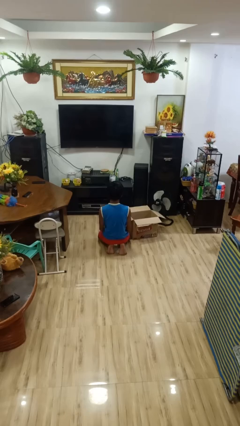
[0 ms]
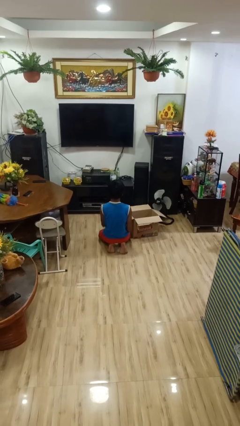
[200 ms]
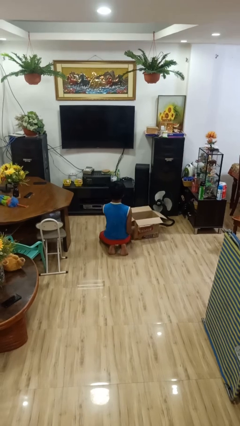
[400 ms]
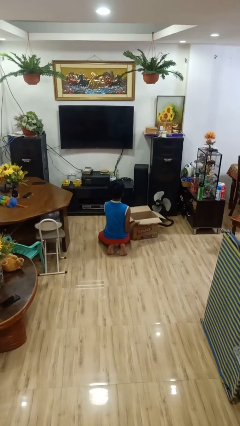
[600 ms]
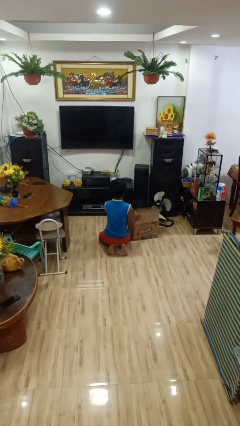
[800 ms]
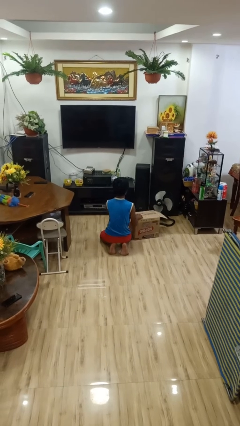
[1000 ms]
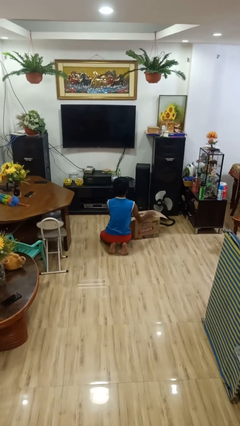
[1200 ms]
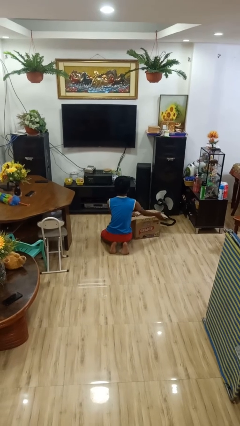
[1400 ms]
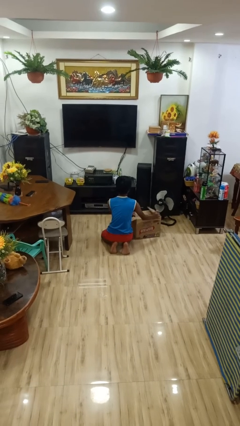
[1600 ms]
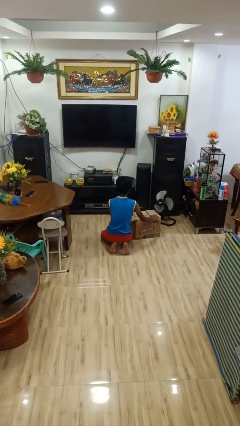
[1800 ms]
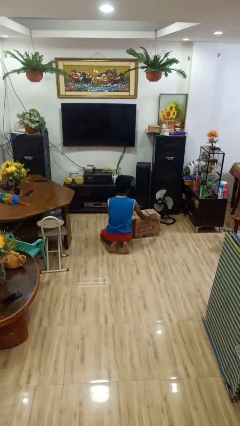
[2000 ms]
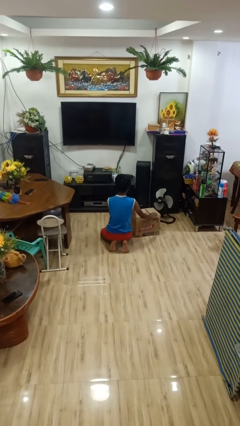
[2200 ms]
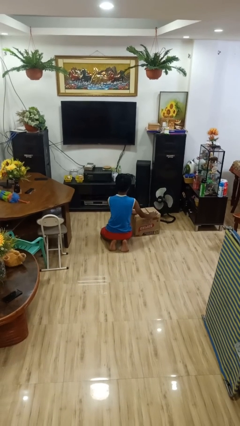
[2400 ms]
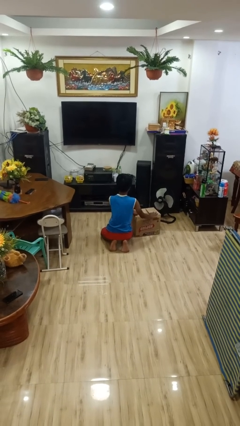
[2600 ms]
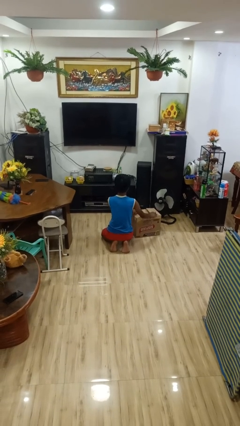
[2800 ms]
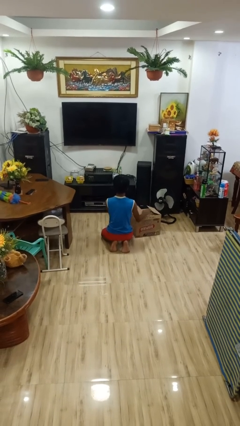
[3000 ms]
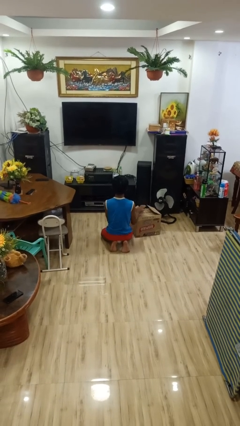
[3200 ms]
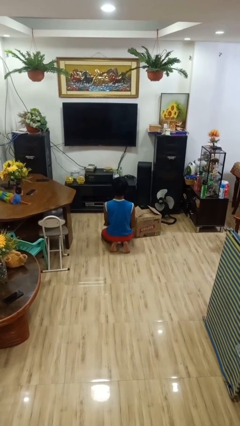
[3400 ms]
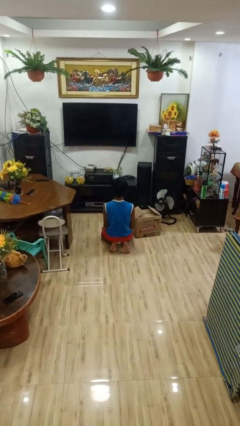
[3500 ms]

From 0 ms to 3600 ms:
person closes box

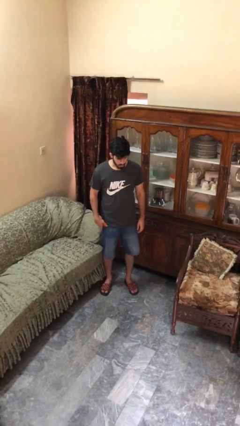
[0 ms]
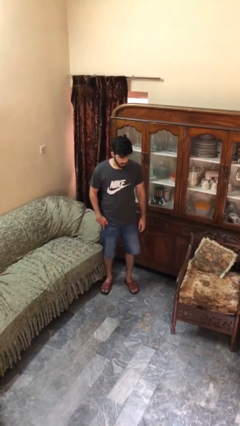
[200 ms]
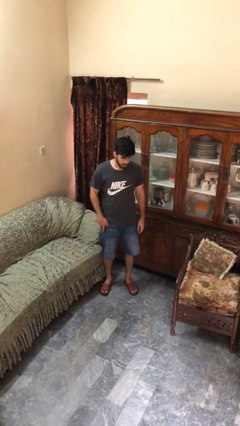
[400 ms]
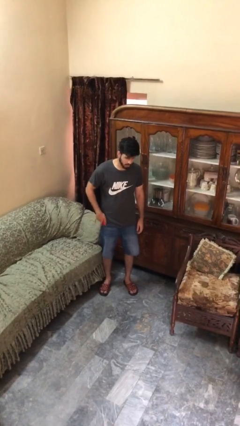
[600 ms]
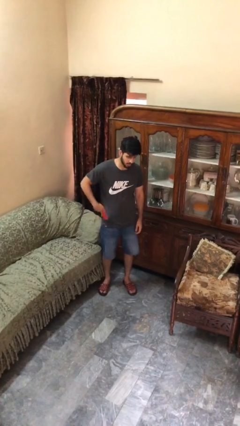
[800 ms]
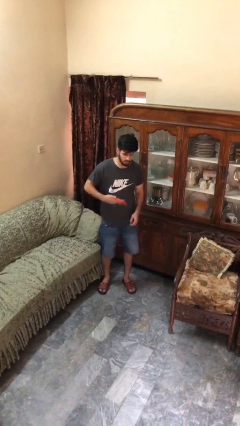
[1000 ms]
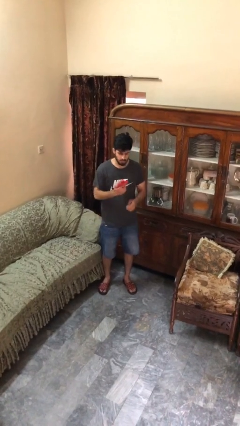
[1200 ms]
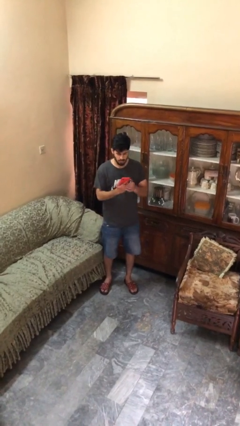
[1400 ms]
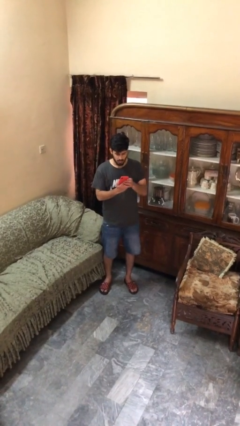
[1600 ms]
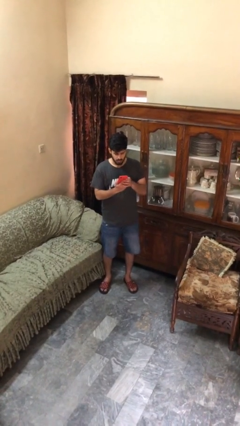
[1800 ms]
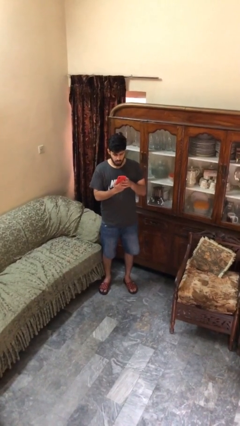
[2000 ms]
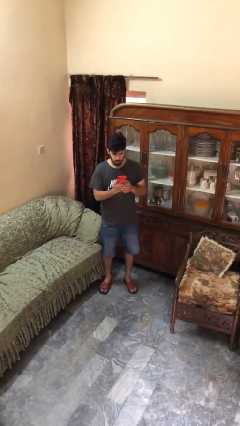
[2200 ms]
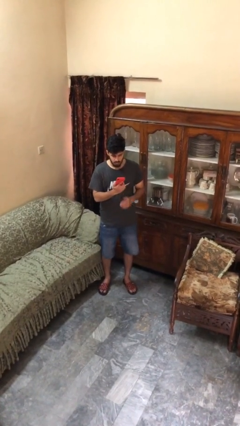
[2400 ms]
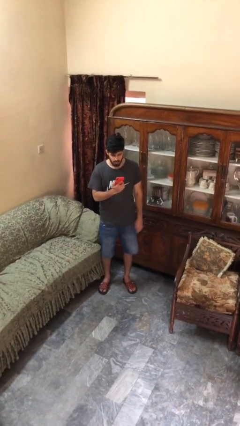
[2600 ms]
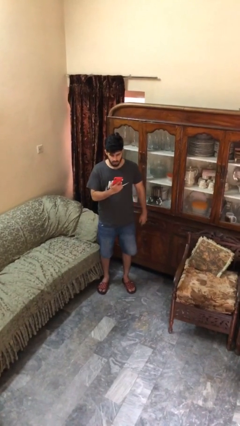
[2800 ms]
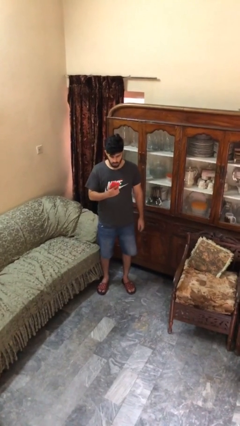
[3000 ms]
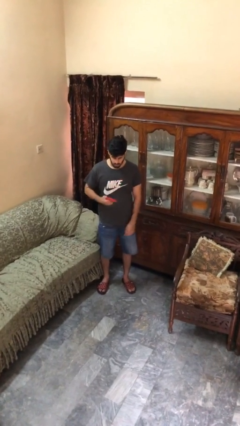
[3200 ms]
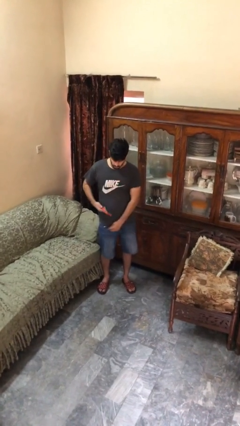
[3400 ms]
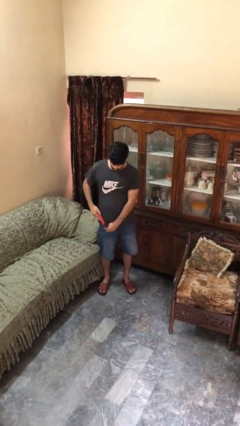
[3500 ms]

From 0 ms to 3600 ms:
person takes phone from pocket

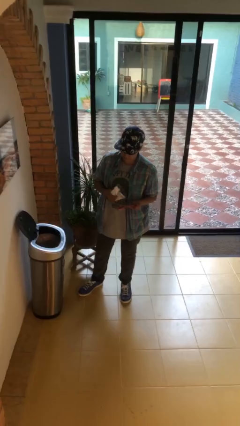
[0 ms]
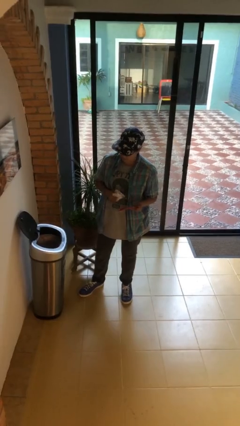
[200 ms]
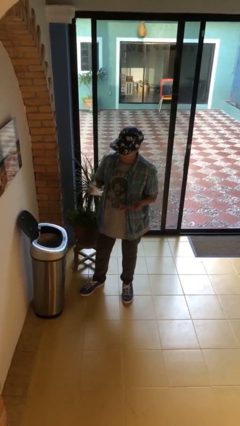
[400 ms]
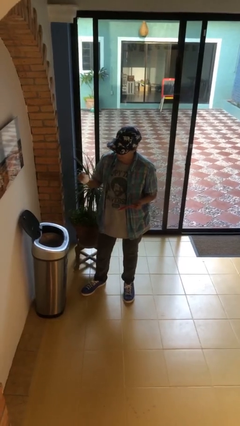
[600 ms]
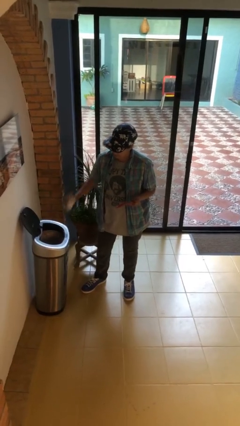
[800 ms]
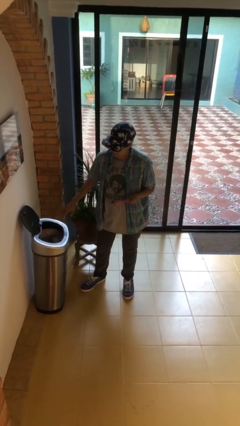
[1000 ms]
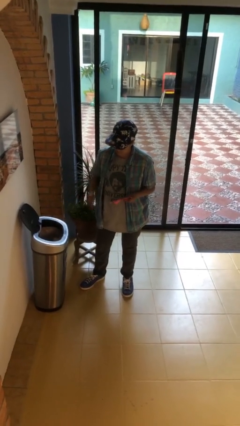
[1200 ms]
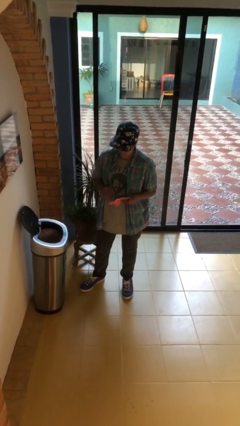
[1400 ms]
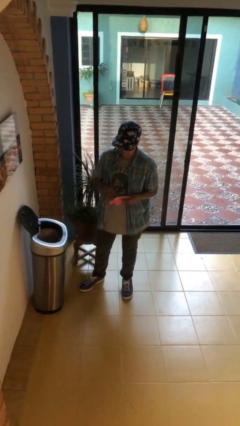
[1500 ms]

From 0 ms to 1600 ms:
person discards trash

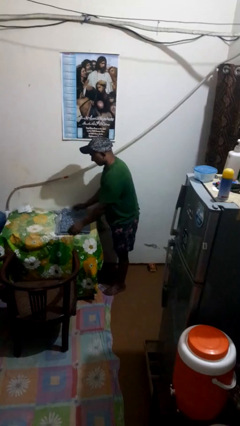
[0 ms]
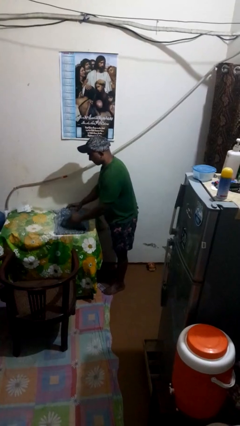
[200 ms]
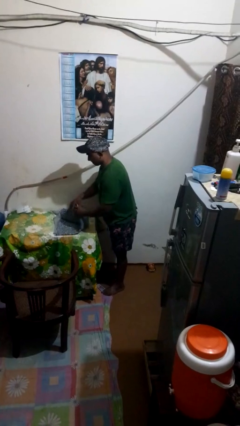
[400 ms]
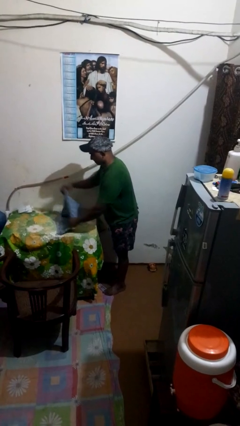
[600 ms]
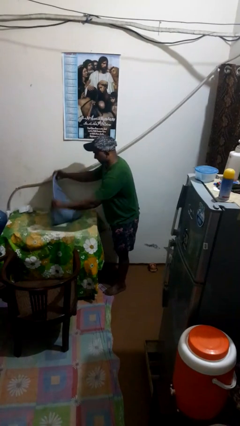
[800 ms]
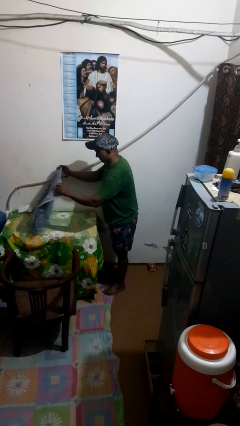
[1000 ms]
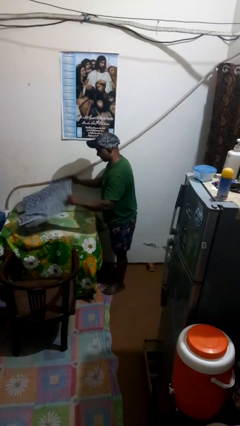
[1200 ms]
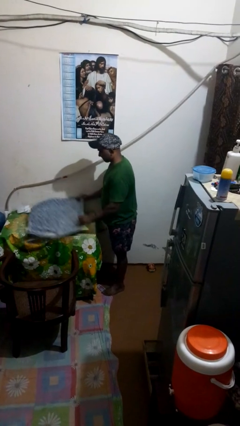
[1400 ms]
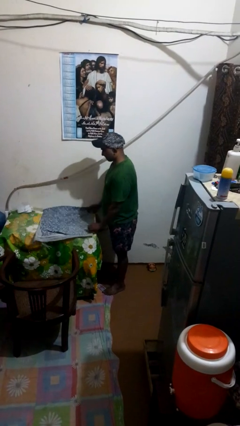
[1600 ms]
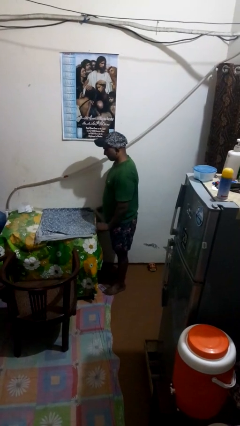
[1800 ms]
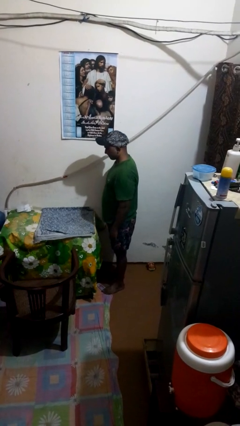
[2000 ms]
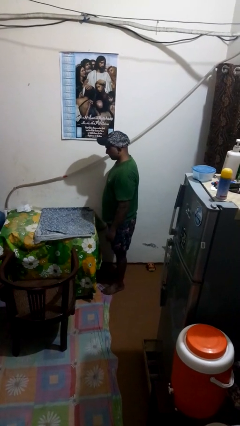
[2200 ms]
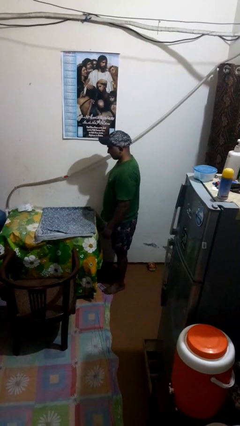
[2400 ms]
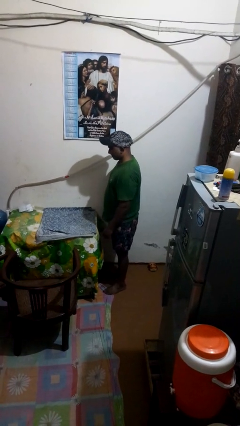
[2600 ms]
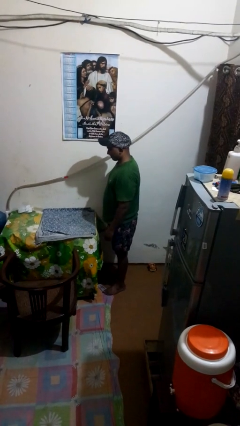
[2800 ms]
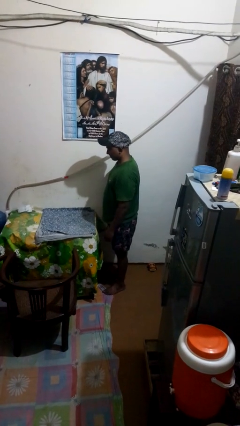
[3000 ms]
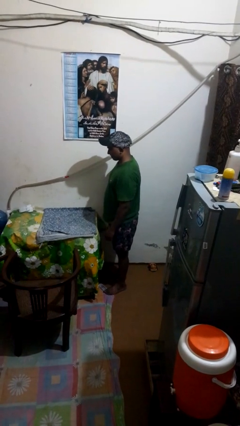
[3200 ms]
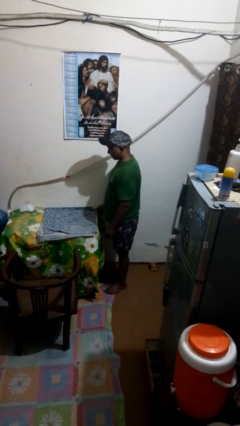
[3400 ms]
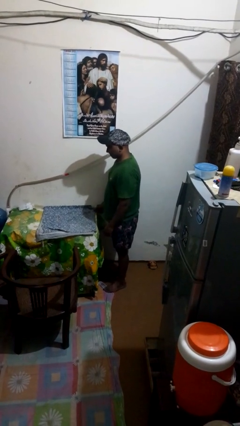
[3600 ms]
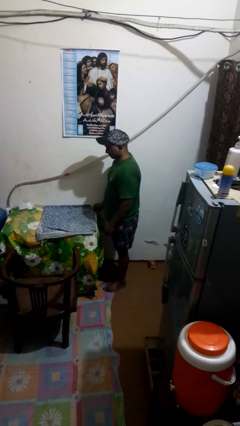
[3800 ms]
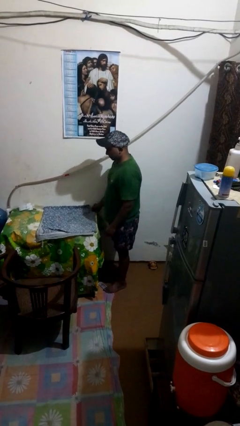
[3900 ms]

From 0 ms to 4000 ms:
person spreads tablecloth

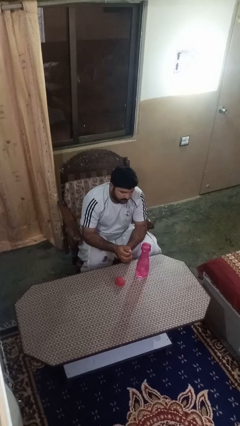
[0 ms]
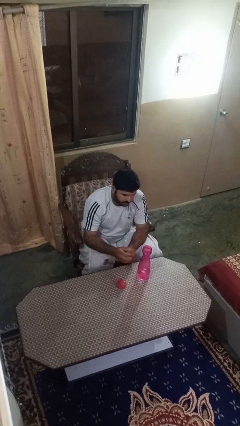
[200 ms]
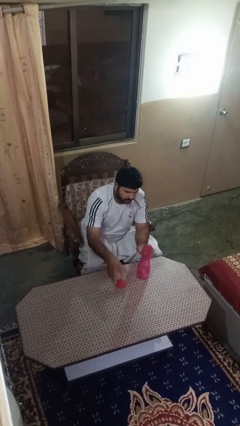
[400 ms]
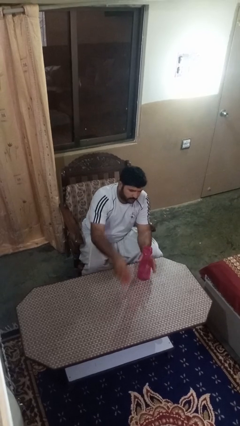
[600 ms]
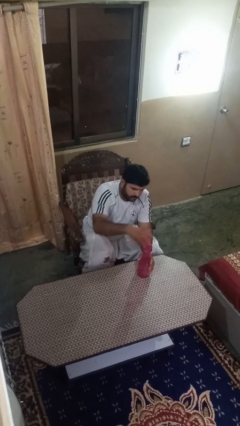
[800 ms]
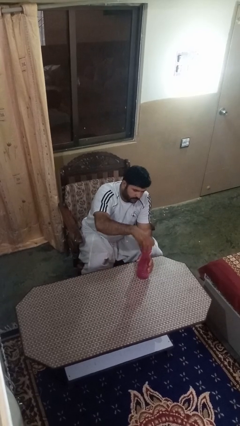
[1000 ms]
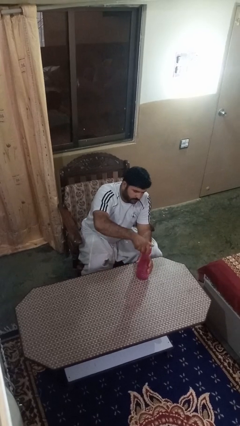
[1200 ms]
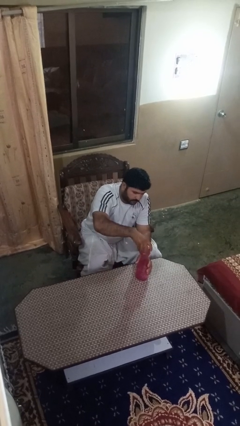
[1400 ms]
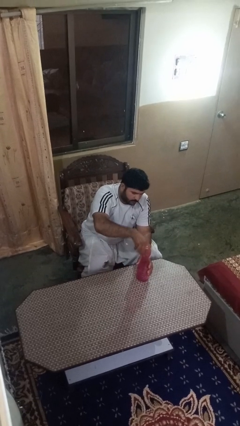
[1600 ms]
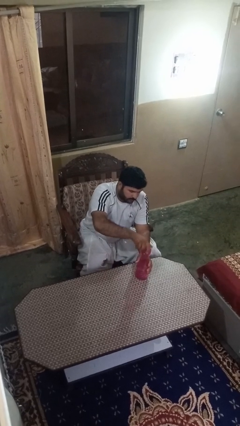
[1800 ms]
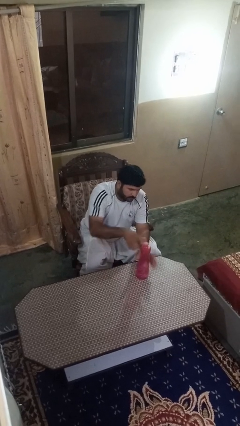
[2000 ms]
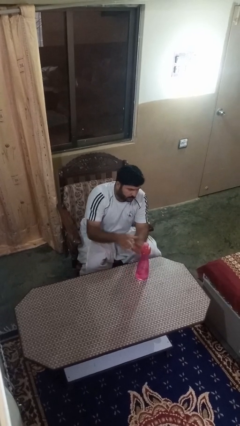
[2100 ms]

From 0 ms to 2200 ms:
person screws lid to bottle

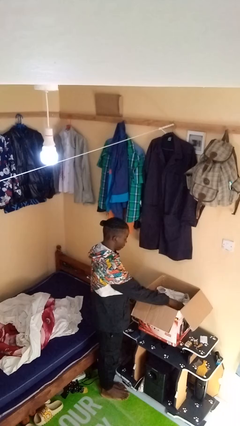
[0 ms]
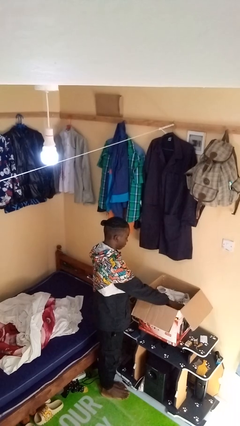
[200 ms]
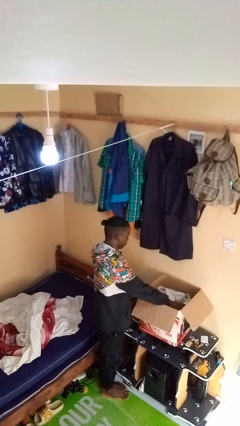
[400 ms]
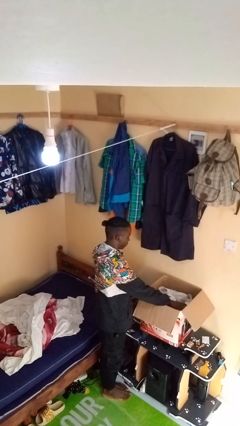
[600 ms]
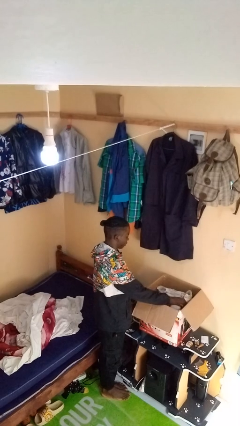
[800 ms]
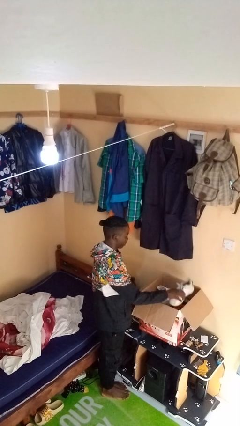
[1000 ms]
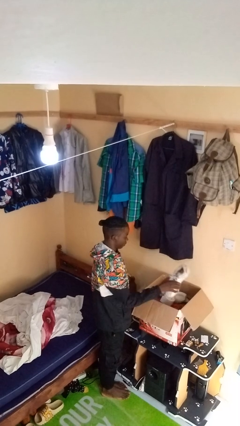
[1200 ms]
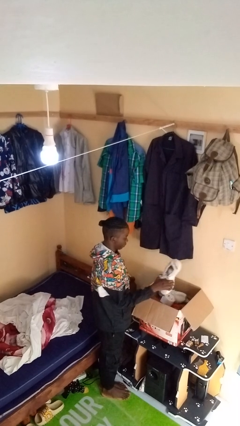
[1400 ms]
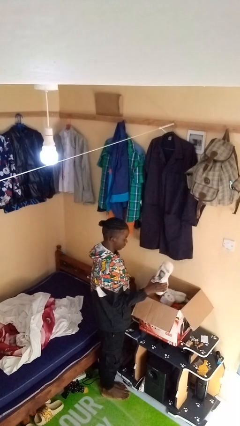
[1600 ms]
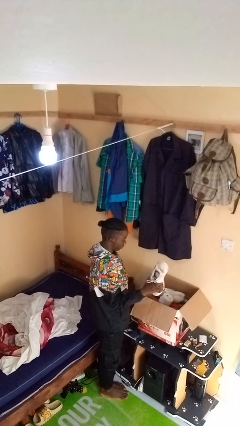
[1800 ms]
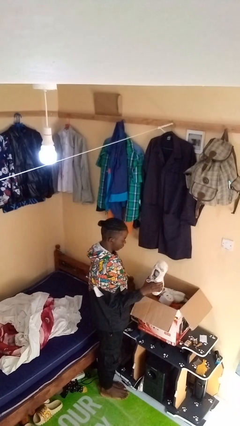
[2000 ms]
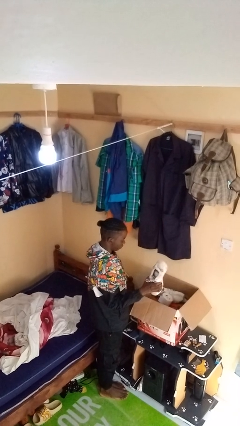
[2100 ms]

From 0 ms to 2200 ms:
person takes object from box

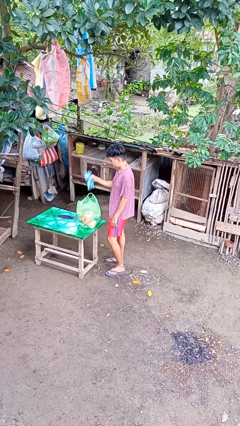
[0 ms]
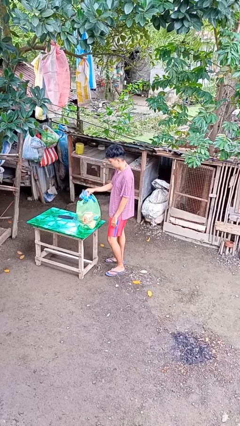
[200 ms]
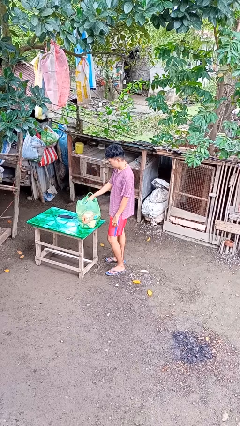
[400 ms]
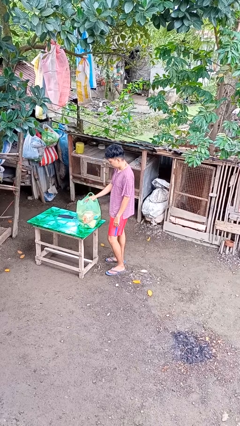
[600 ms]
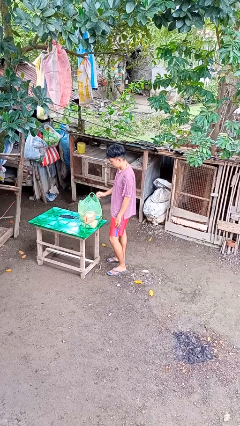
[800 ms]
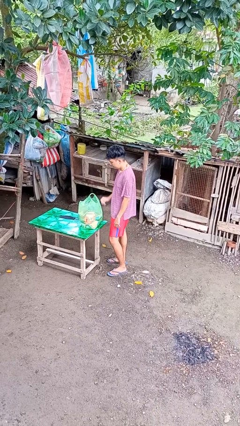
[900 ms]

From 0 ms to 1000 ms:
person puts object into bag
